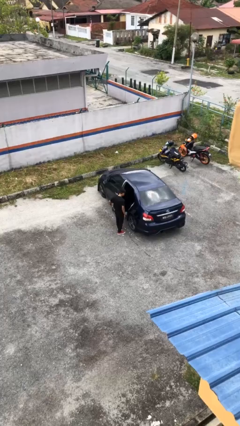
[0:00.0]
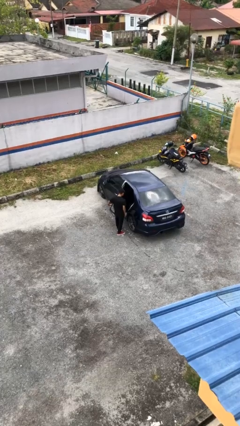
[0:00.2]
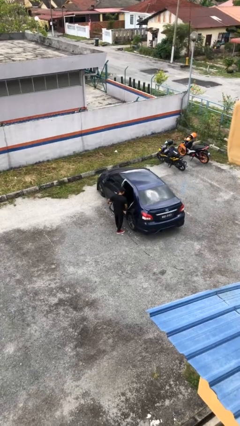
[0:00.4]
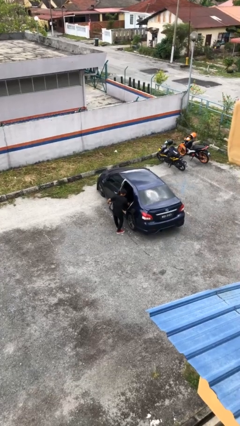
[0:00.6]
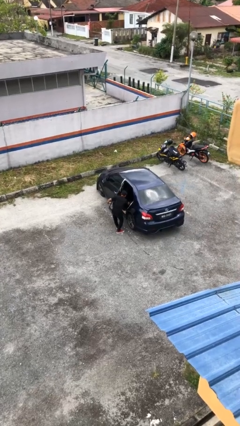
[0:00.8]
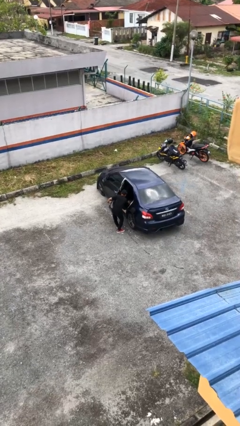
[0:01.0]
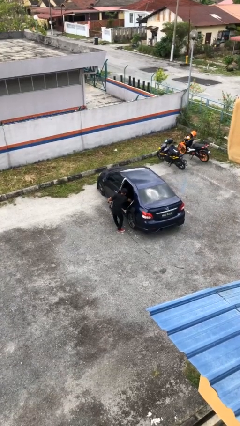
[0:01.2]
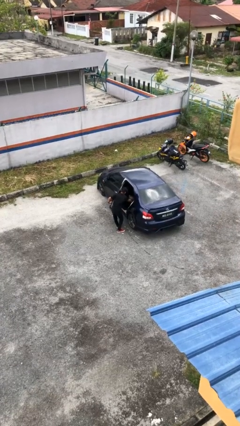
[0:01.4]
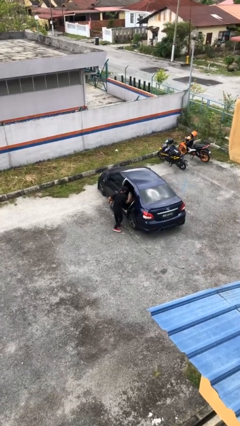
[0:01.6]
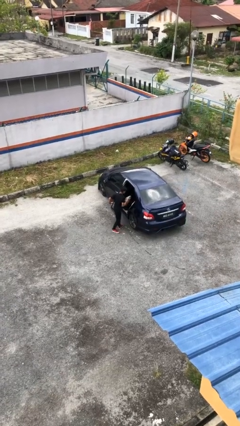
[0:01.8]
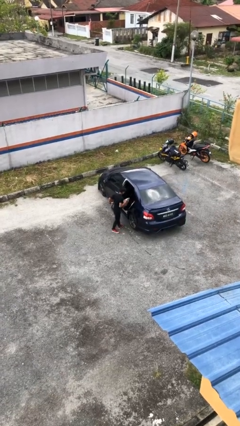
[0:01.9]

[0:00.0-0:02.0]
person unloads car

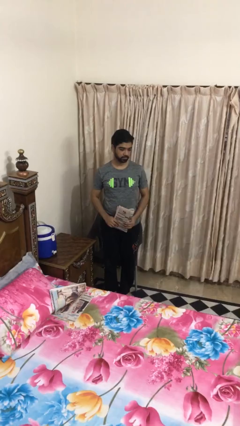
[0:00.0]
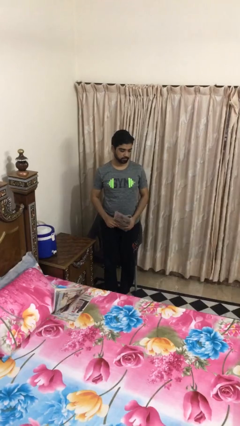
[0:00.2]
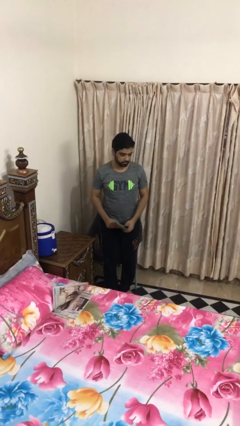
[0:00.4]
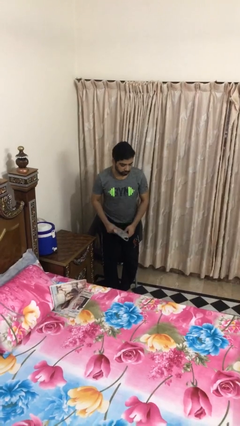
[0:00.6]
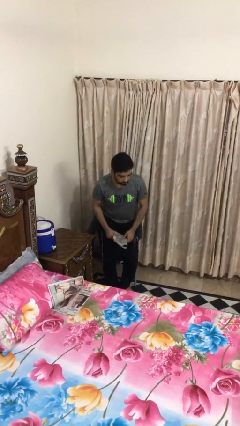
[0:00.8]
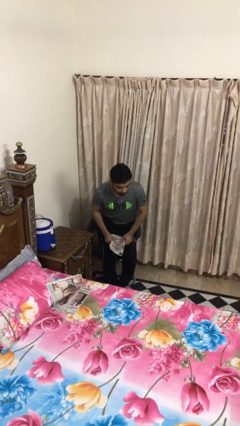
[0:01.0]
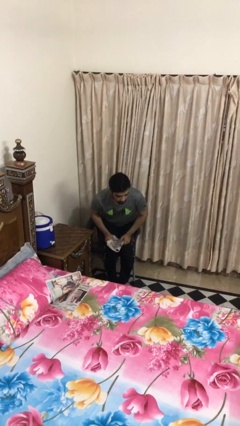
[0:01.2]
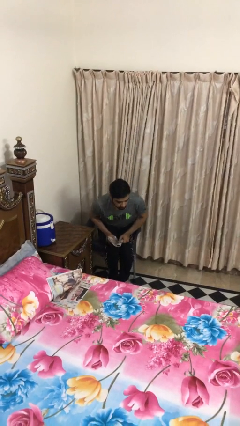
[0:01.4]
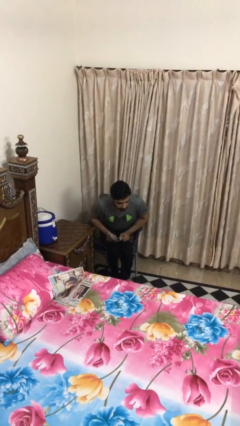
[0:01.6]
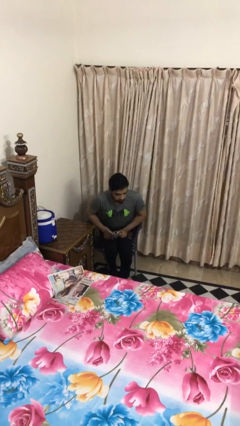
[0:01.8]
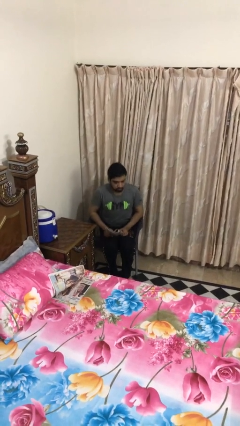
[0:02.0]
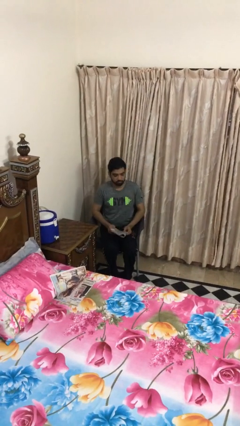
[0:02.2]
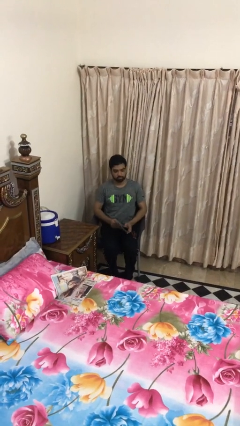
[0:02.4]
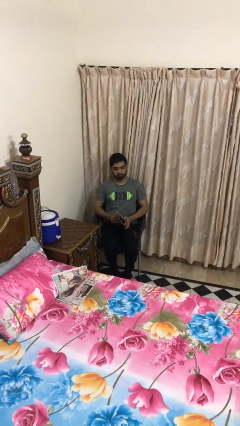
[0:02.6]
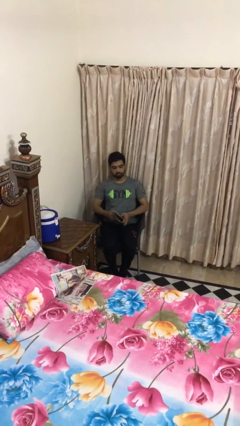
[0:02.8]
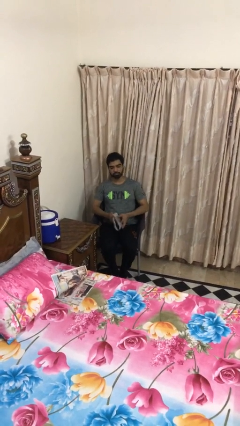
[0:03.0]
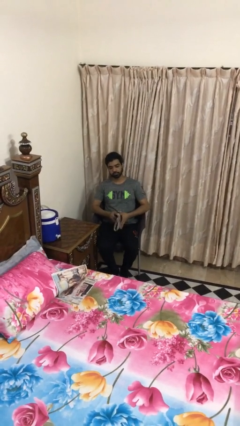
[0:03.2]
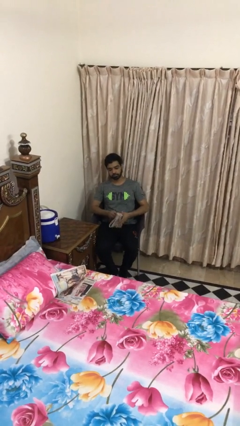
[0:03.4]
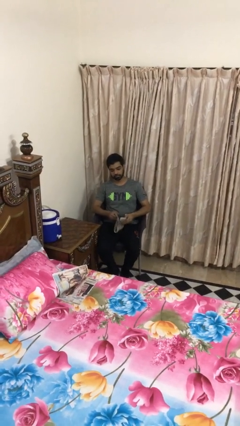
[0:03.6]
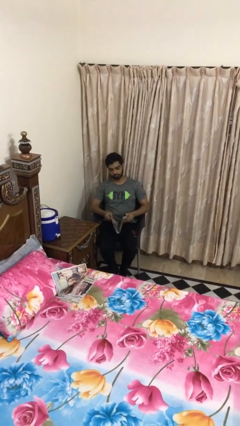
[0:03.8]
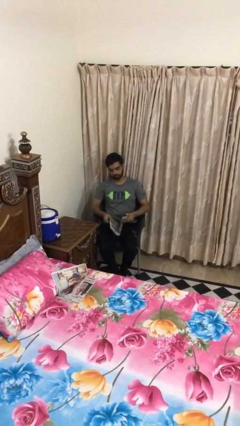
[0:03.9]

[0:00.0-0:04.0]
person sits down

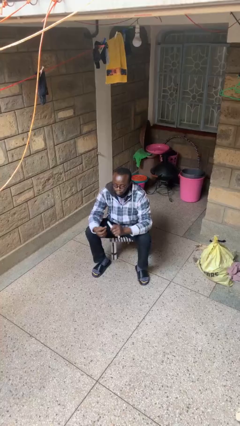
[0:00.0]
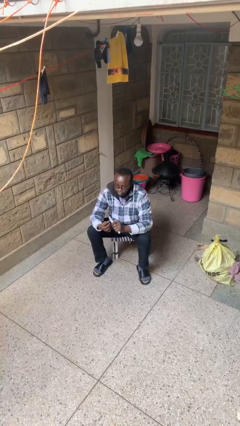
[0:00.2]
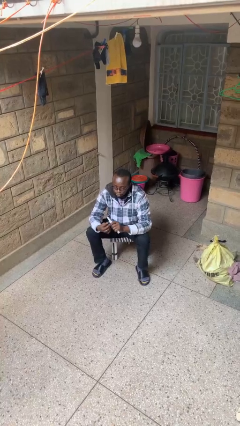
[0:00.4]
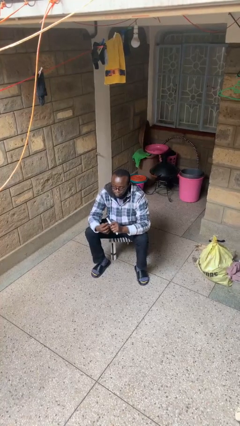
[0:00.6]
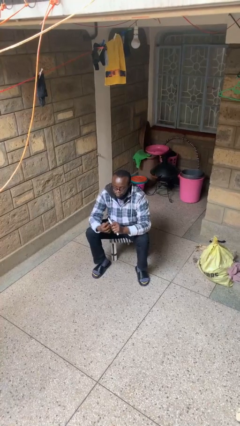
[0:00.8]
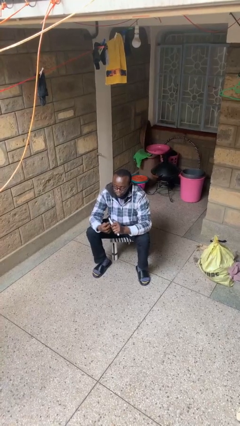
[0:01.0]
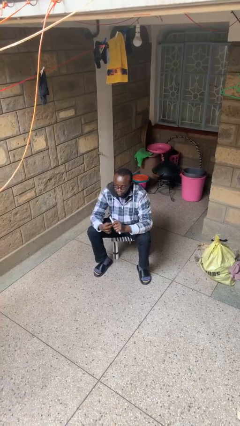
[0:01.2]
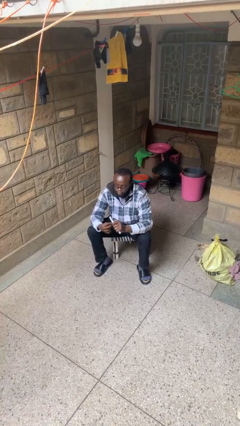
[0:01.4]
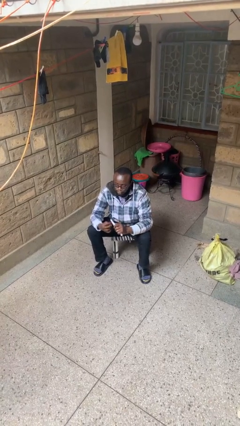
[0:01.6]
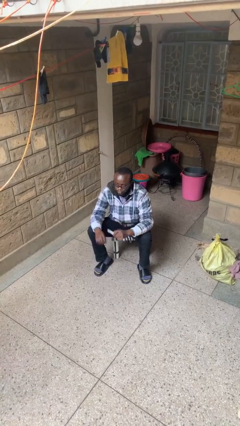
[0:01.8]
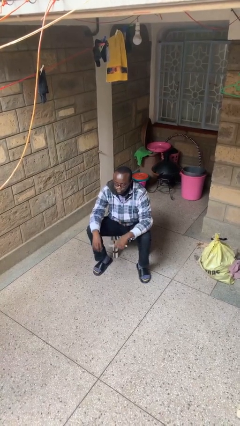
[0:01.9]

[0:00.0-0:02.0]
person files fingernails

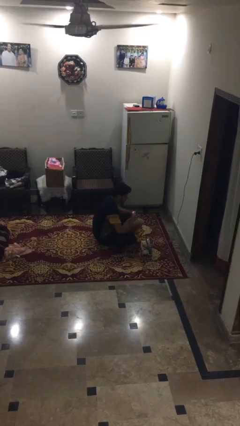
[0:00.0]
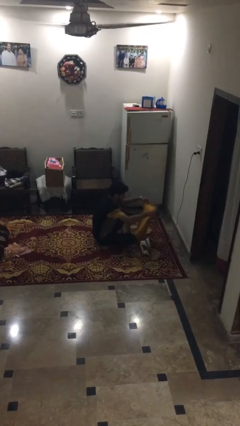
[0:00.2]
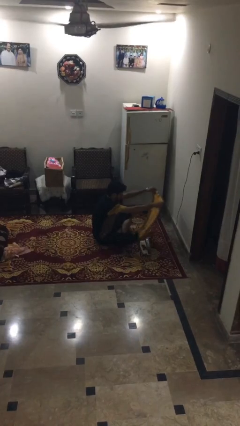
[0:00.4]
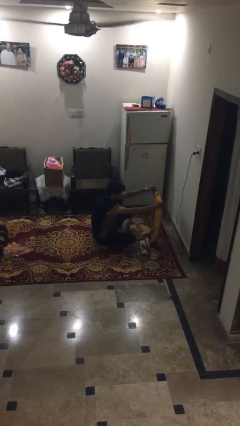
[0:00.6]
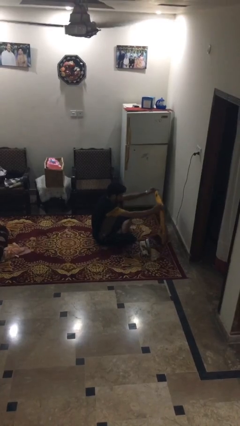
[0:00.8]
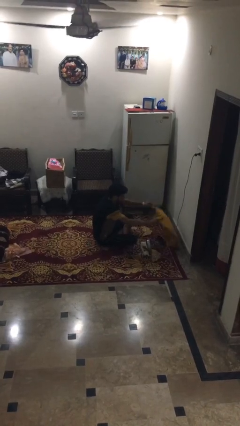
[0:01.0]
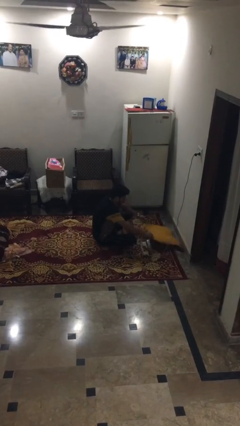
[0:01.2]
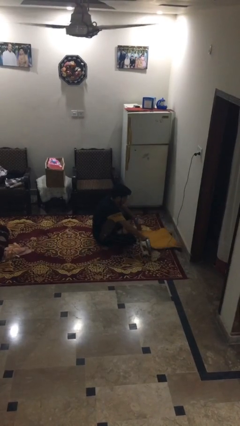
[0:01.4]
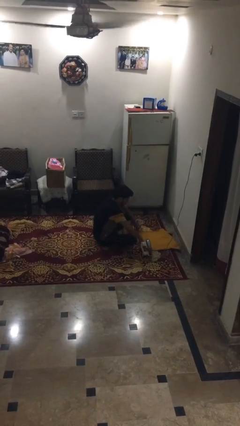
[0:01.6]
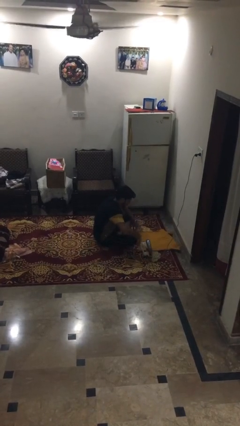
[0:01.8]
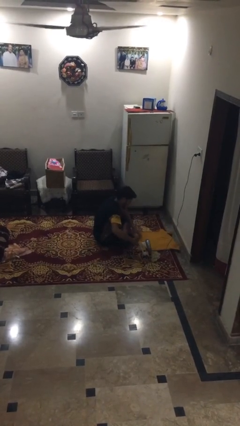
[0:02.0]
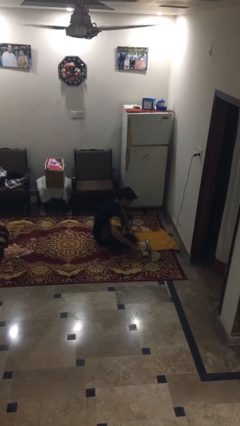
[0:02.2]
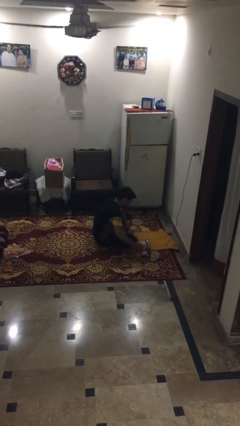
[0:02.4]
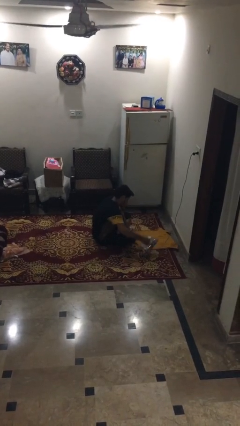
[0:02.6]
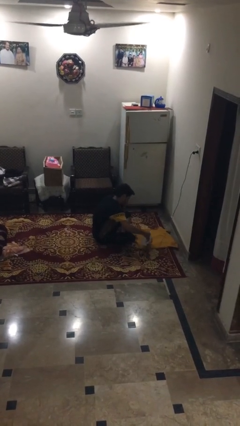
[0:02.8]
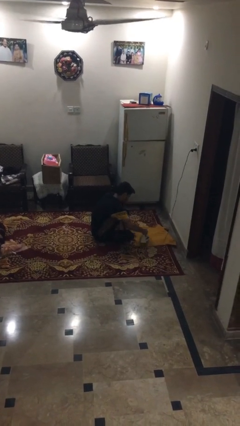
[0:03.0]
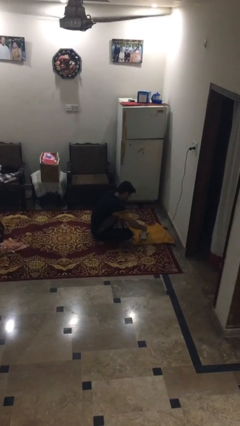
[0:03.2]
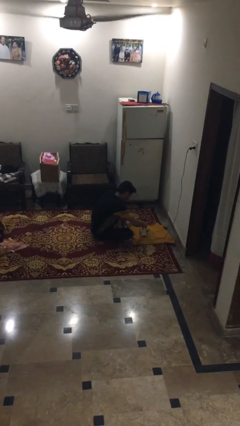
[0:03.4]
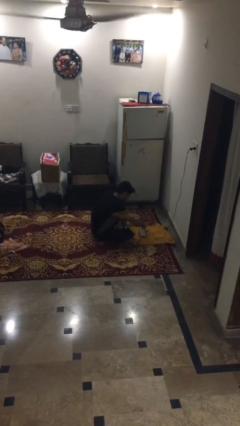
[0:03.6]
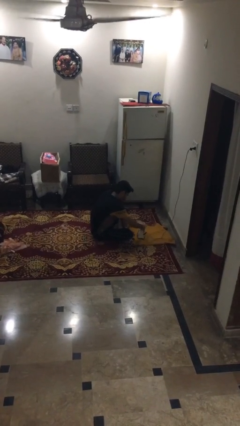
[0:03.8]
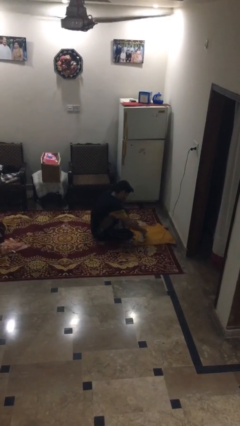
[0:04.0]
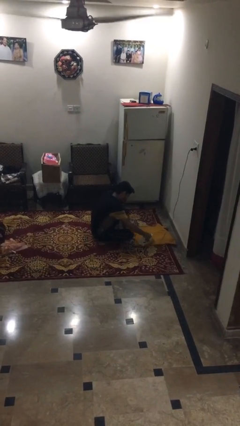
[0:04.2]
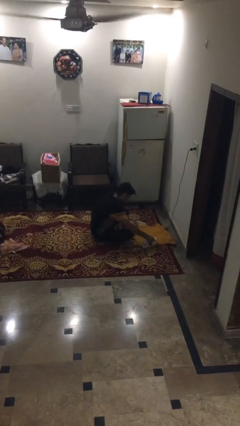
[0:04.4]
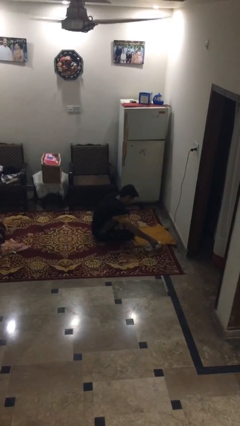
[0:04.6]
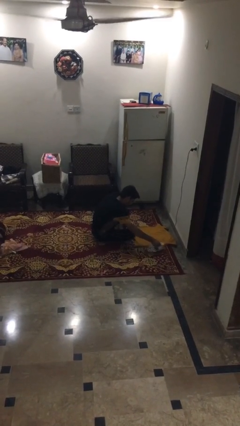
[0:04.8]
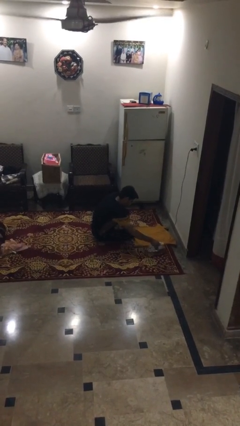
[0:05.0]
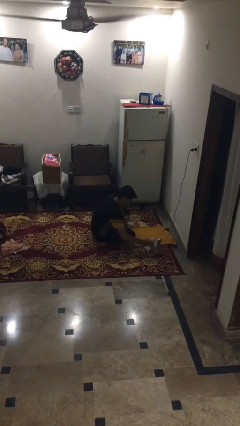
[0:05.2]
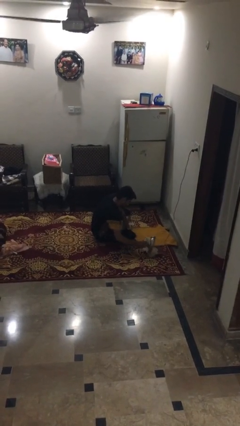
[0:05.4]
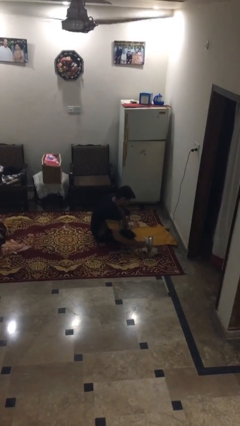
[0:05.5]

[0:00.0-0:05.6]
person irons clothes

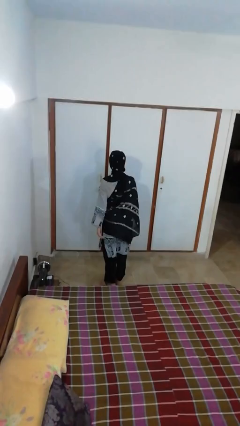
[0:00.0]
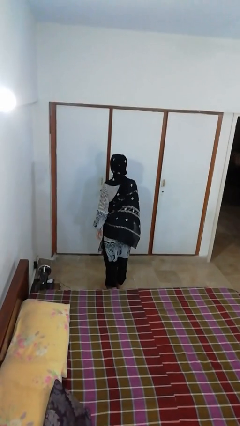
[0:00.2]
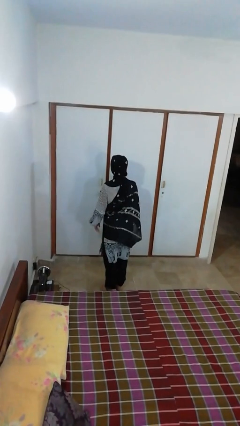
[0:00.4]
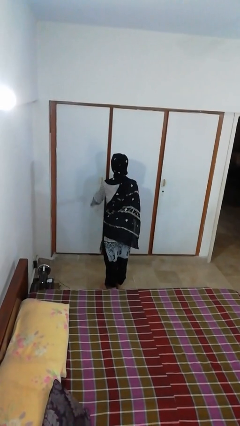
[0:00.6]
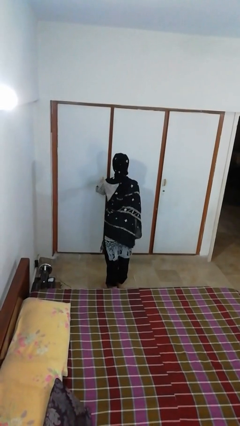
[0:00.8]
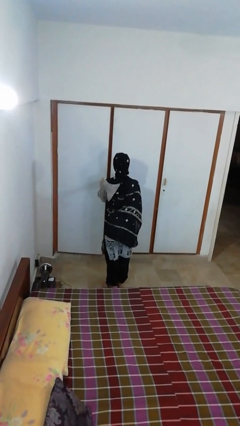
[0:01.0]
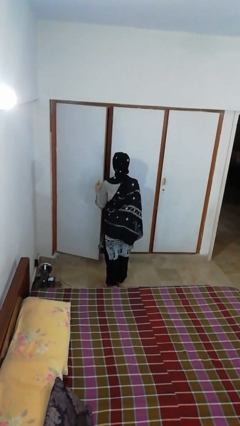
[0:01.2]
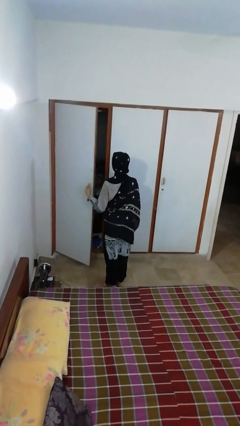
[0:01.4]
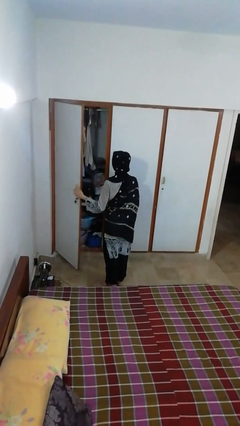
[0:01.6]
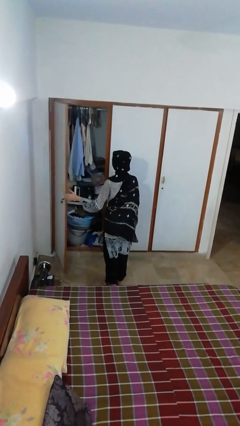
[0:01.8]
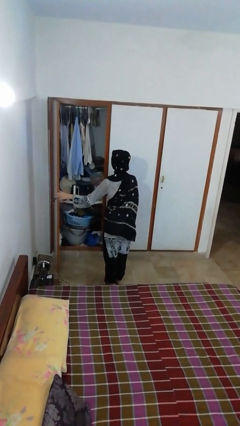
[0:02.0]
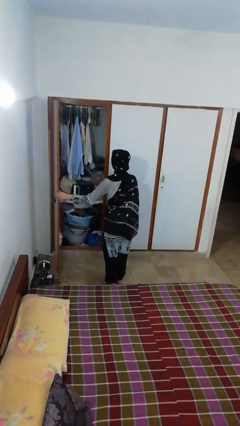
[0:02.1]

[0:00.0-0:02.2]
person opens closet door

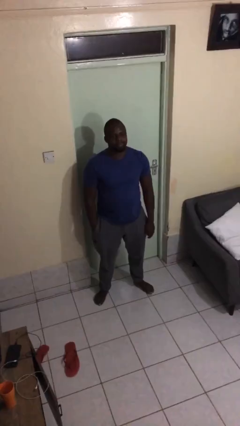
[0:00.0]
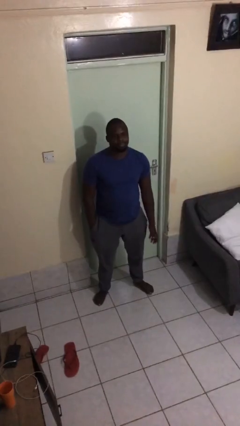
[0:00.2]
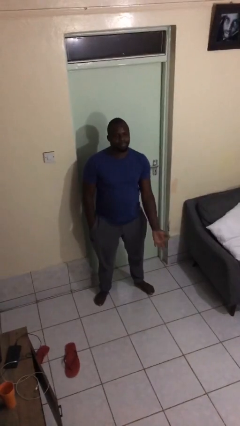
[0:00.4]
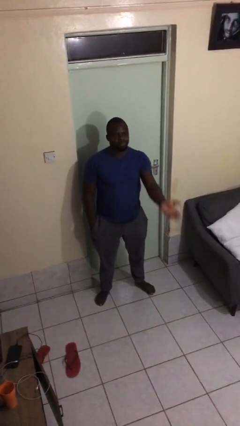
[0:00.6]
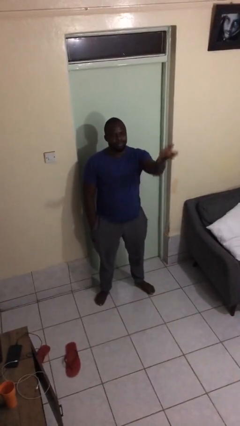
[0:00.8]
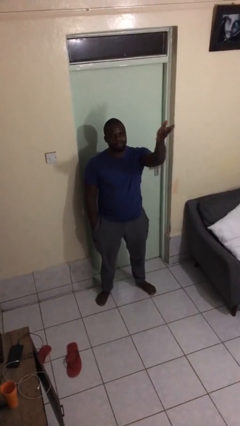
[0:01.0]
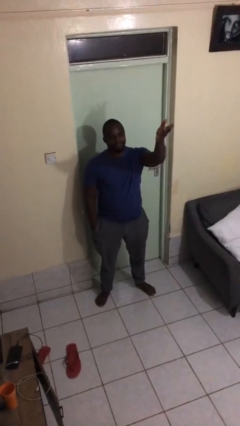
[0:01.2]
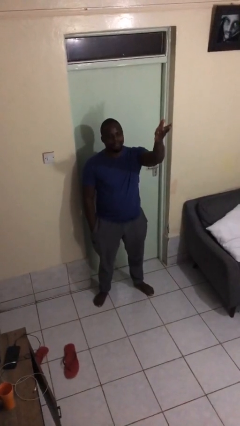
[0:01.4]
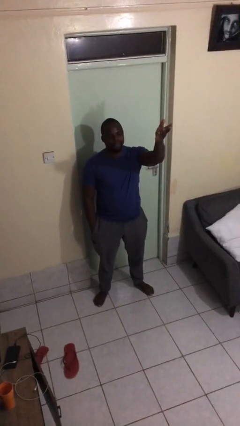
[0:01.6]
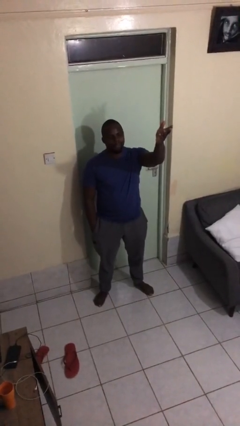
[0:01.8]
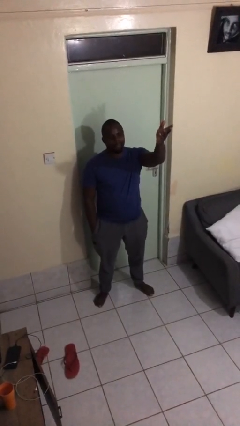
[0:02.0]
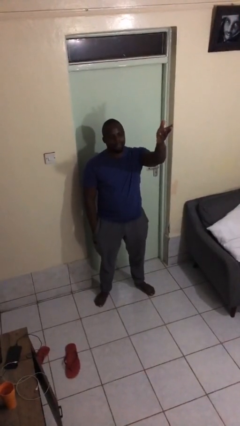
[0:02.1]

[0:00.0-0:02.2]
person gestures swipe up
